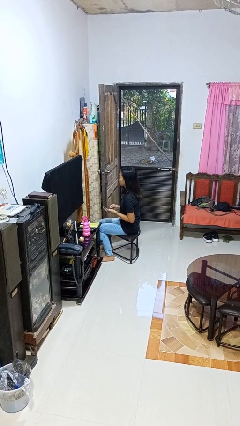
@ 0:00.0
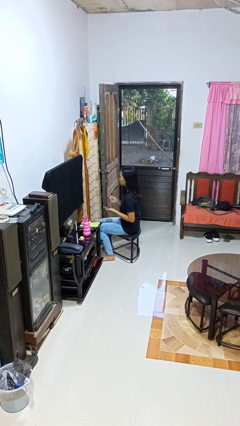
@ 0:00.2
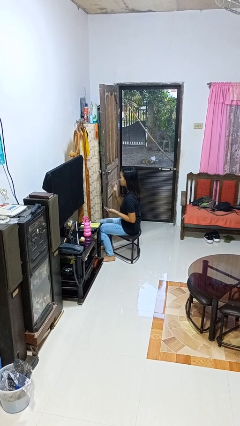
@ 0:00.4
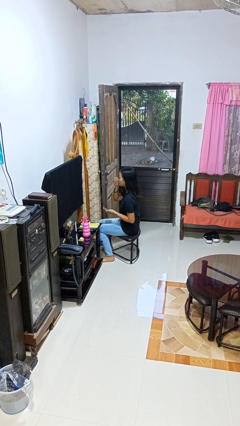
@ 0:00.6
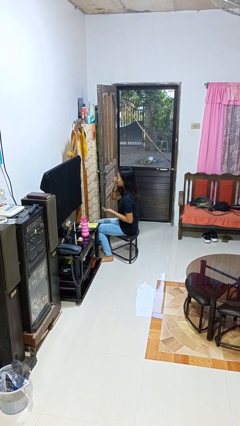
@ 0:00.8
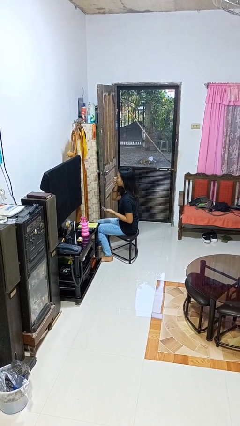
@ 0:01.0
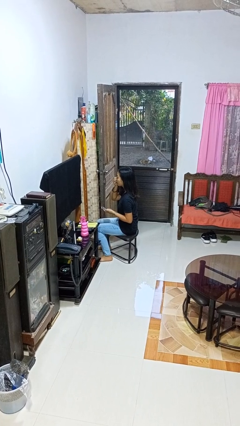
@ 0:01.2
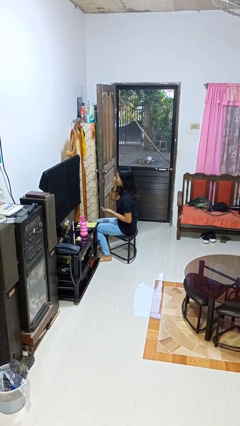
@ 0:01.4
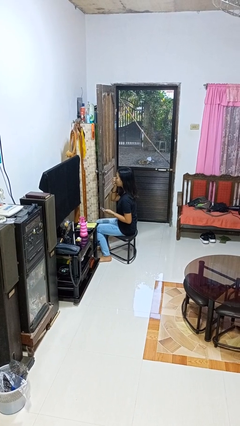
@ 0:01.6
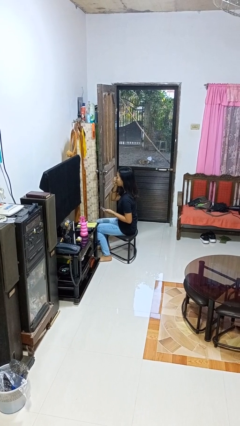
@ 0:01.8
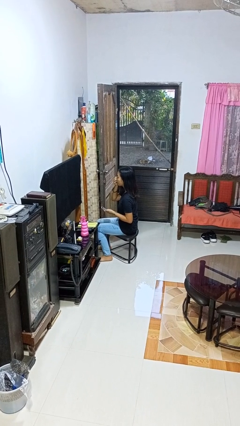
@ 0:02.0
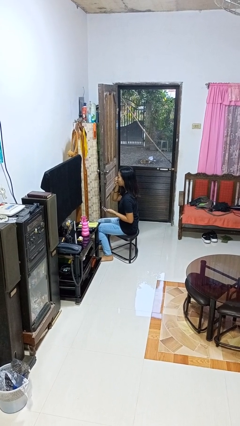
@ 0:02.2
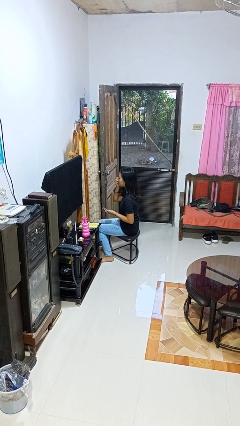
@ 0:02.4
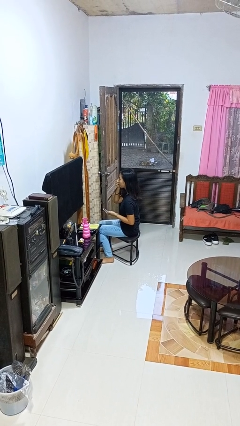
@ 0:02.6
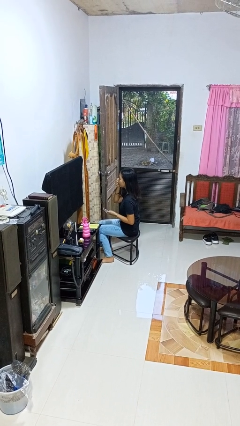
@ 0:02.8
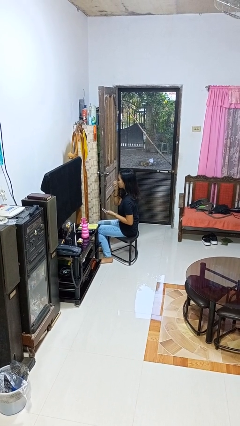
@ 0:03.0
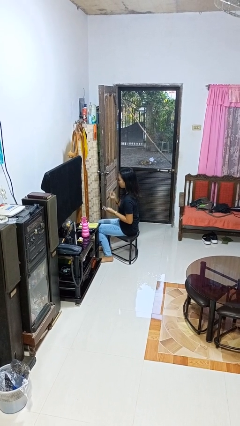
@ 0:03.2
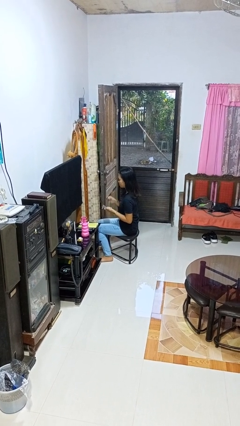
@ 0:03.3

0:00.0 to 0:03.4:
person applies eye makeup

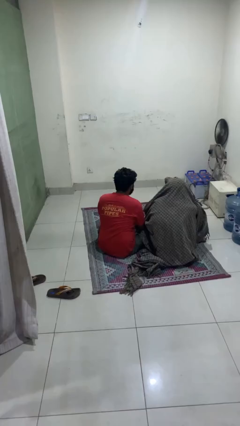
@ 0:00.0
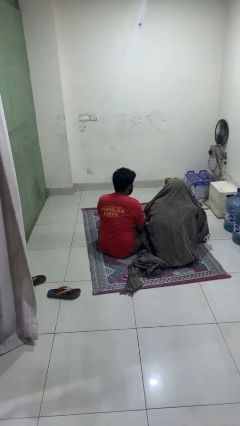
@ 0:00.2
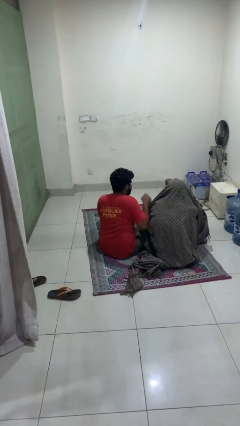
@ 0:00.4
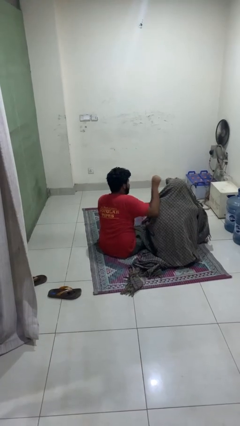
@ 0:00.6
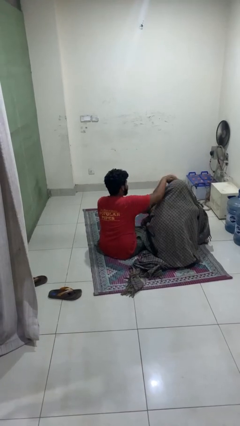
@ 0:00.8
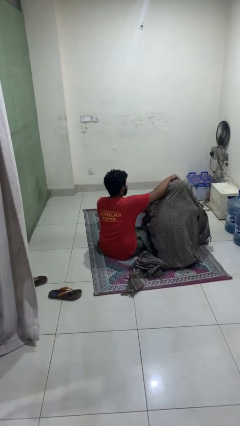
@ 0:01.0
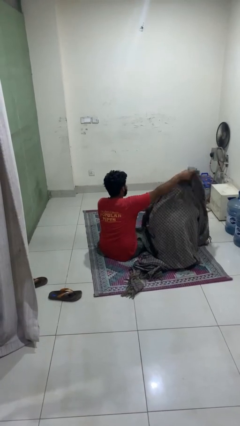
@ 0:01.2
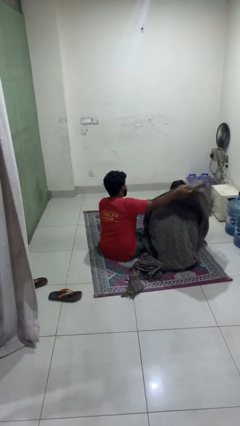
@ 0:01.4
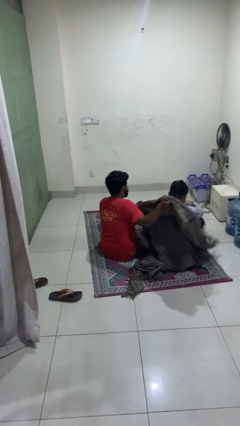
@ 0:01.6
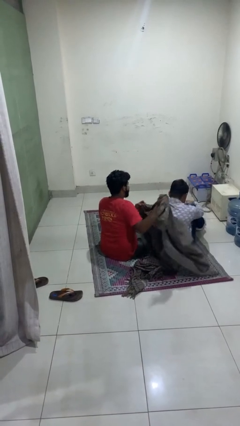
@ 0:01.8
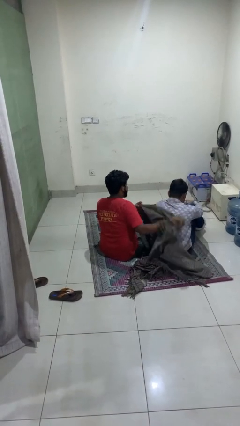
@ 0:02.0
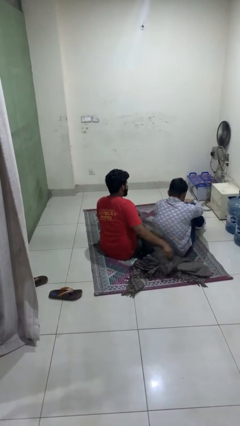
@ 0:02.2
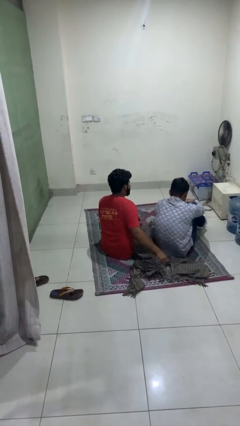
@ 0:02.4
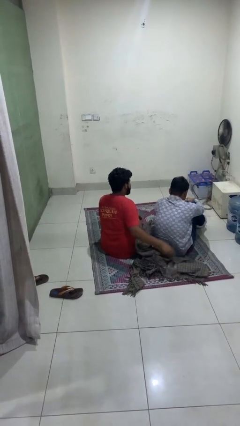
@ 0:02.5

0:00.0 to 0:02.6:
person uncovers friend with blanket

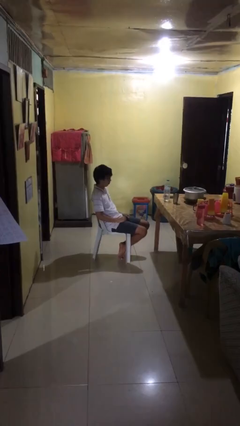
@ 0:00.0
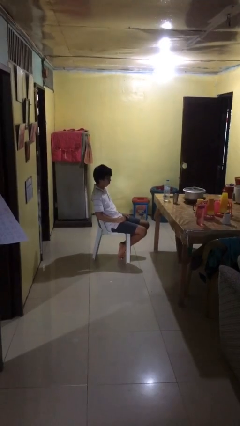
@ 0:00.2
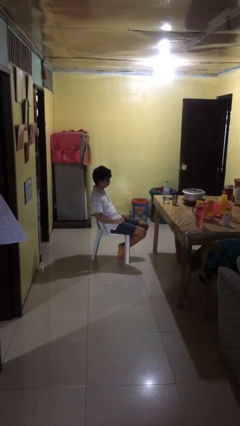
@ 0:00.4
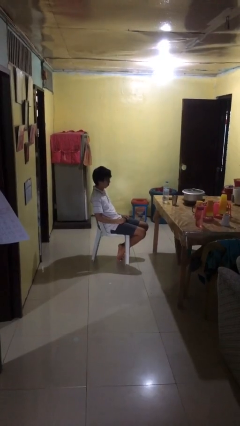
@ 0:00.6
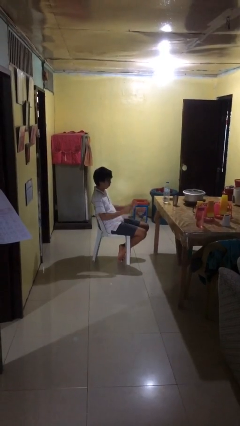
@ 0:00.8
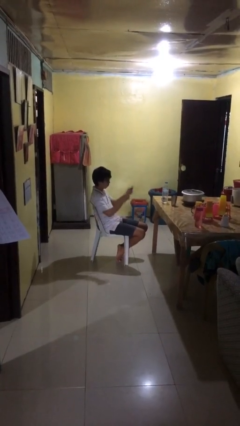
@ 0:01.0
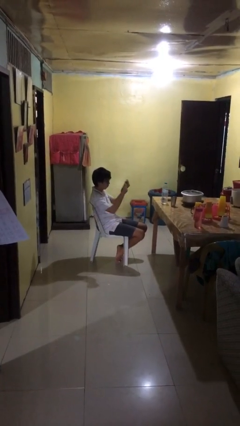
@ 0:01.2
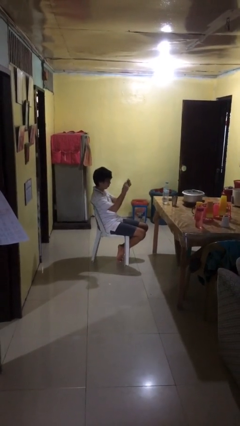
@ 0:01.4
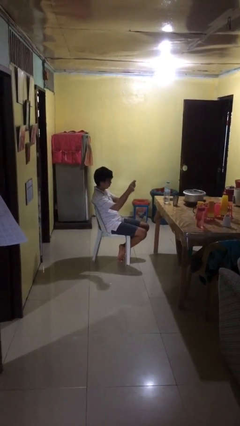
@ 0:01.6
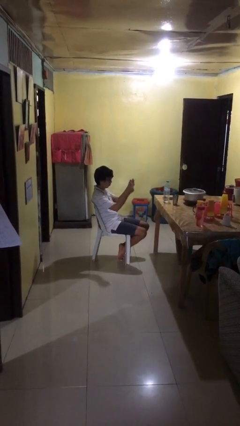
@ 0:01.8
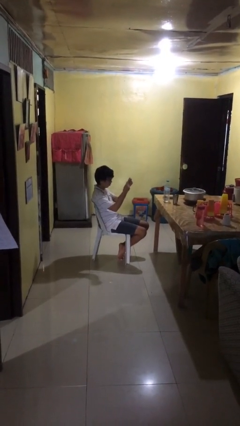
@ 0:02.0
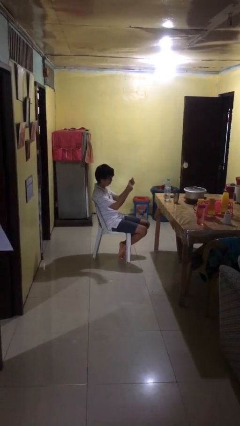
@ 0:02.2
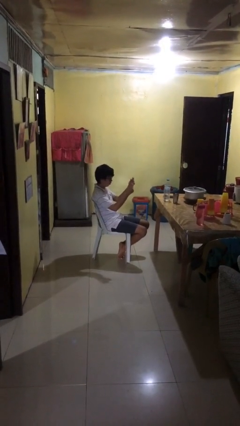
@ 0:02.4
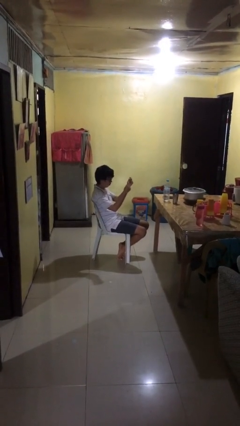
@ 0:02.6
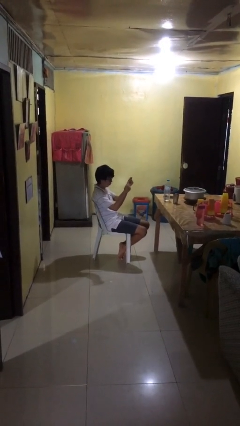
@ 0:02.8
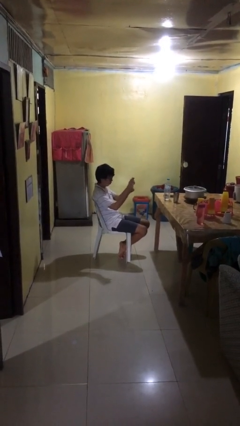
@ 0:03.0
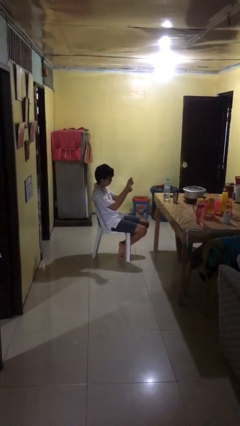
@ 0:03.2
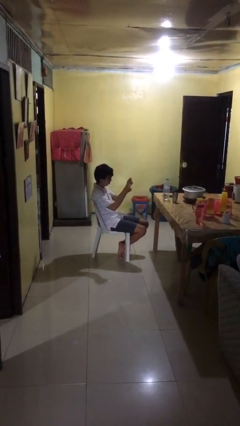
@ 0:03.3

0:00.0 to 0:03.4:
person snaps fingers

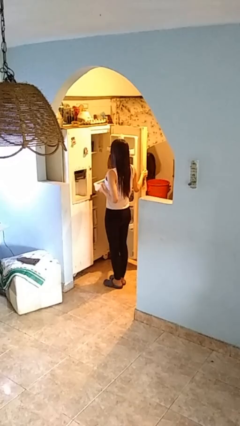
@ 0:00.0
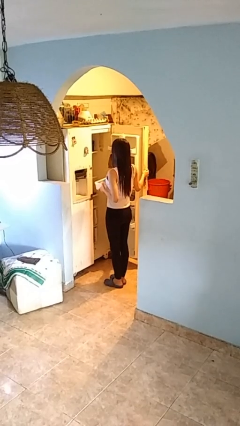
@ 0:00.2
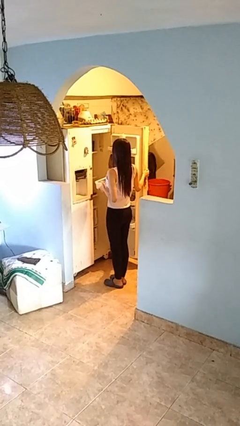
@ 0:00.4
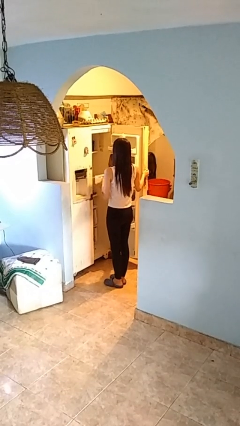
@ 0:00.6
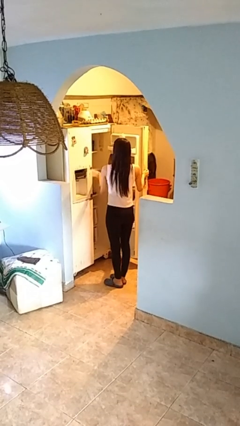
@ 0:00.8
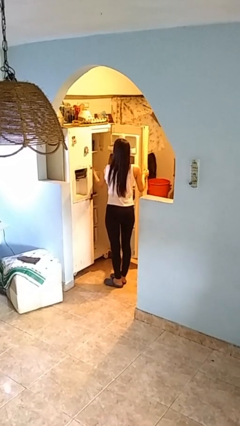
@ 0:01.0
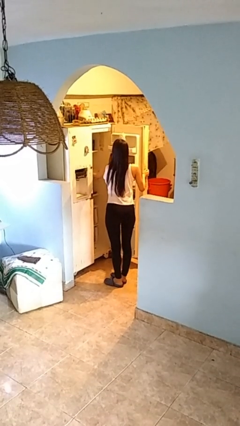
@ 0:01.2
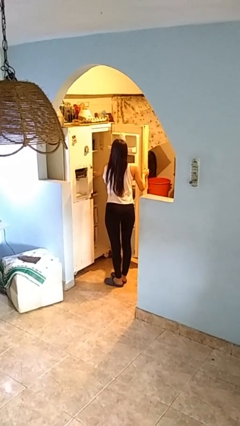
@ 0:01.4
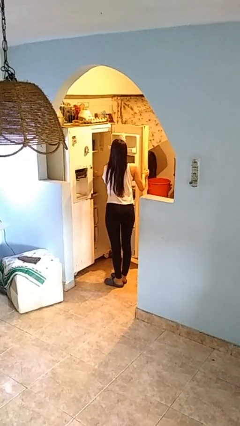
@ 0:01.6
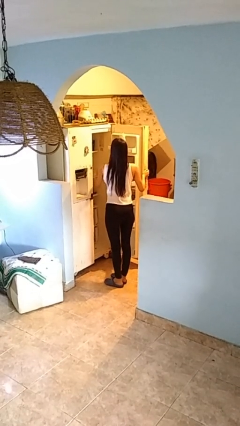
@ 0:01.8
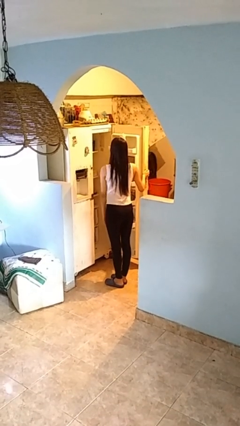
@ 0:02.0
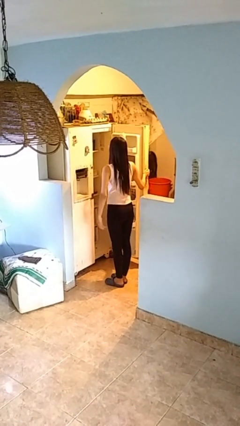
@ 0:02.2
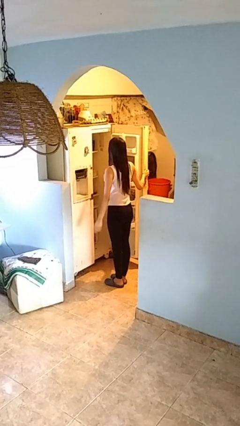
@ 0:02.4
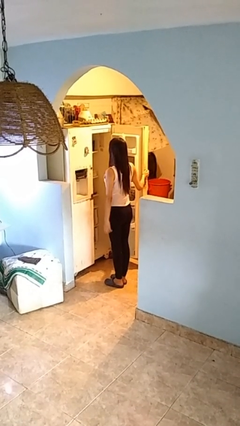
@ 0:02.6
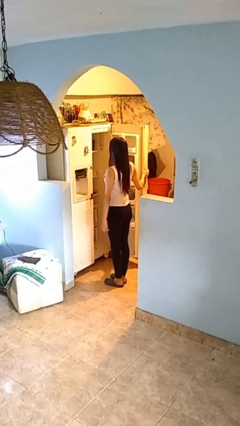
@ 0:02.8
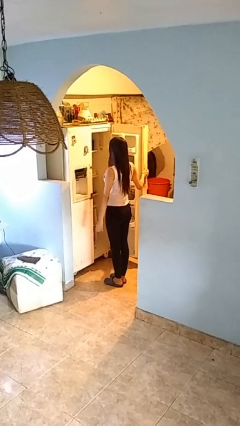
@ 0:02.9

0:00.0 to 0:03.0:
person puts object into refrigerator

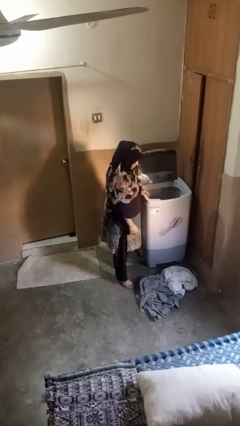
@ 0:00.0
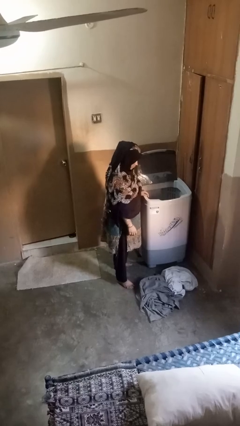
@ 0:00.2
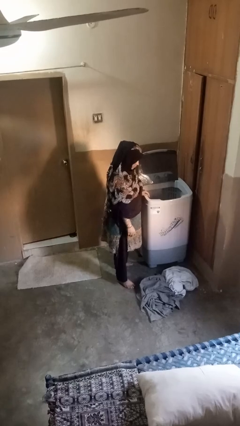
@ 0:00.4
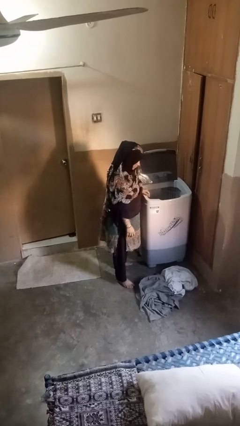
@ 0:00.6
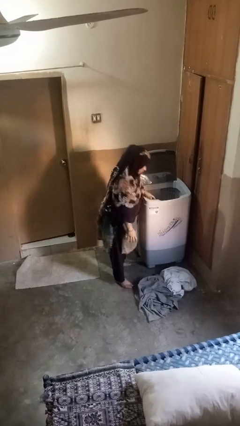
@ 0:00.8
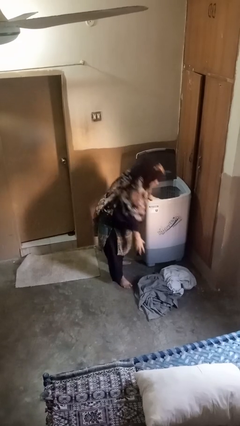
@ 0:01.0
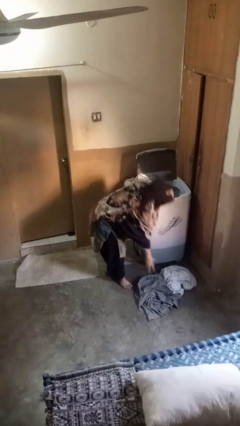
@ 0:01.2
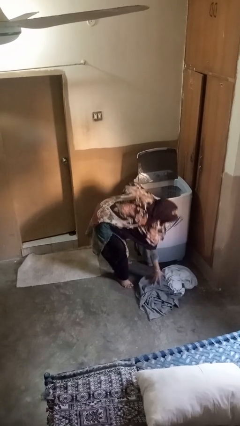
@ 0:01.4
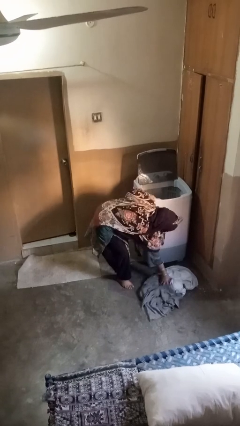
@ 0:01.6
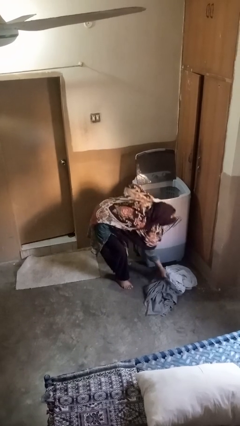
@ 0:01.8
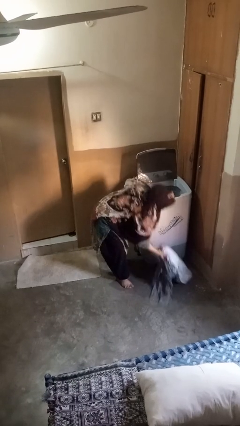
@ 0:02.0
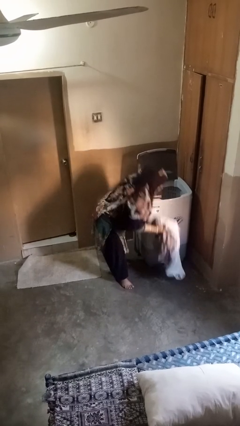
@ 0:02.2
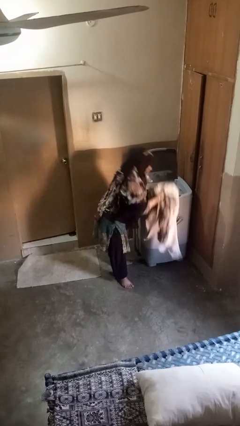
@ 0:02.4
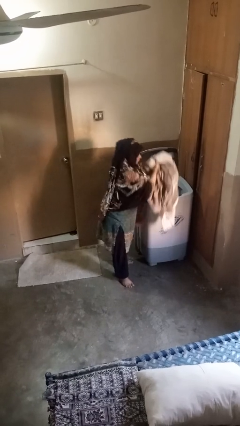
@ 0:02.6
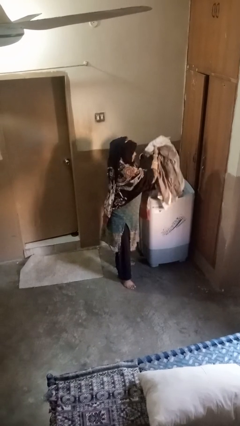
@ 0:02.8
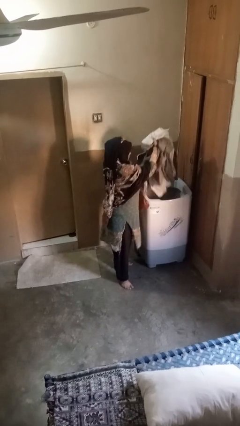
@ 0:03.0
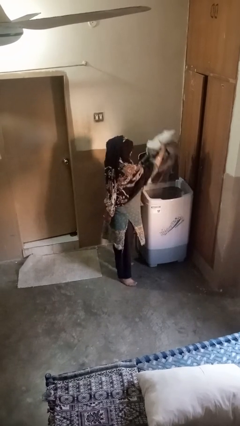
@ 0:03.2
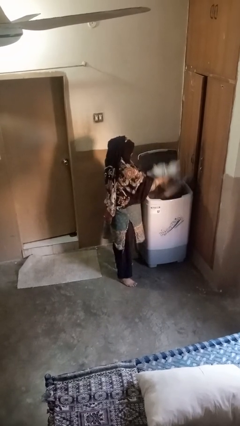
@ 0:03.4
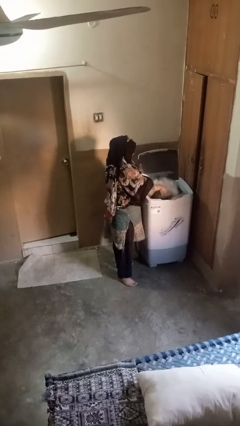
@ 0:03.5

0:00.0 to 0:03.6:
person loads clotheswasher

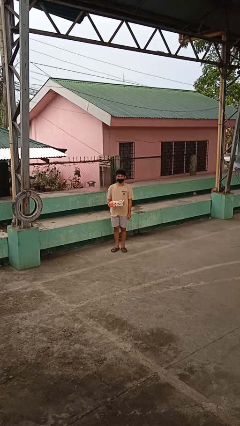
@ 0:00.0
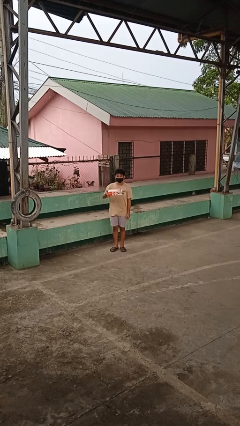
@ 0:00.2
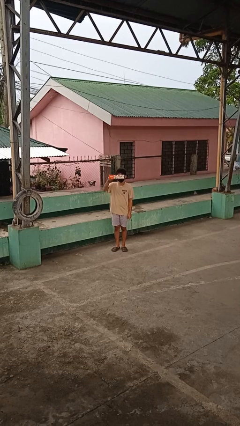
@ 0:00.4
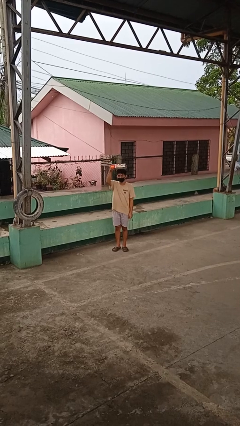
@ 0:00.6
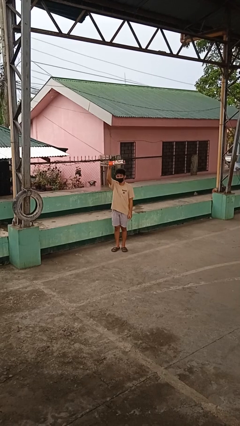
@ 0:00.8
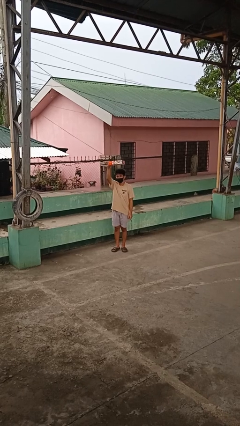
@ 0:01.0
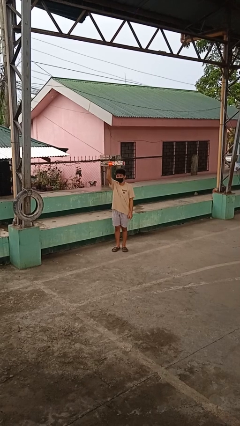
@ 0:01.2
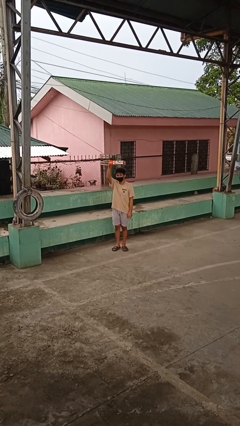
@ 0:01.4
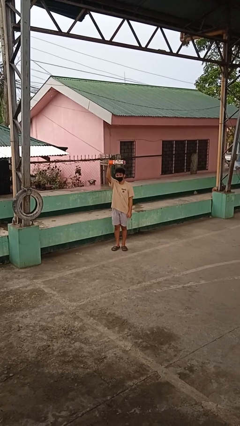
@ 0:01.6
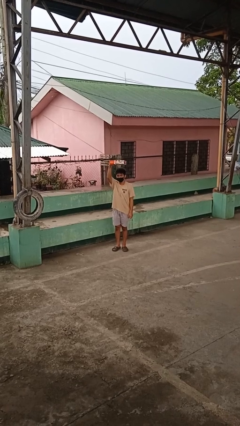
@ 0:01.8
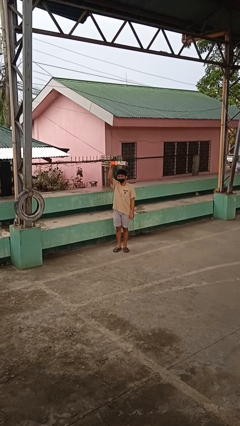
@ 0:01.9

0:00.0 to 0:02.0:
person holds object above head
